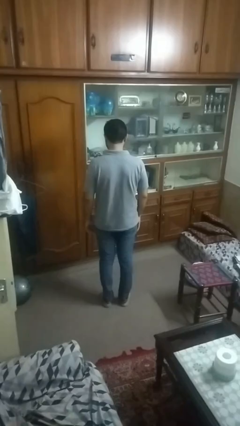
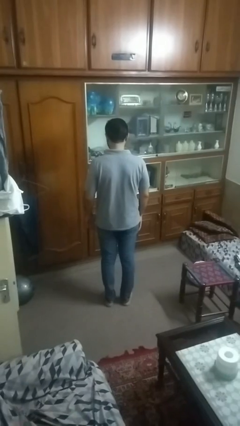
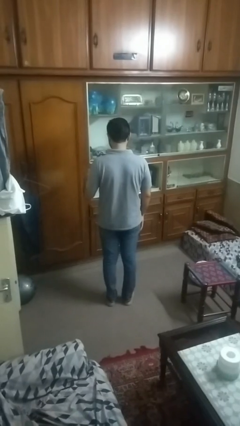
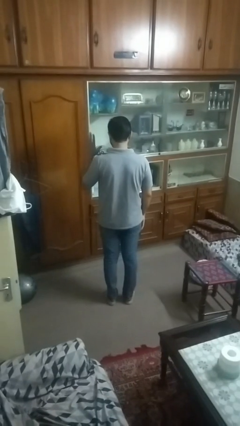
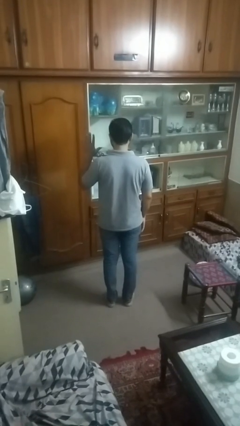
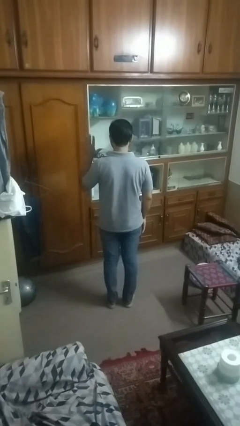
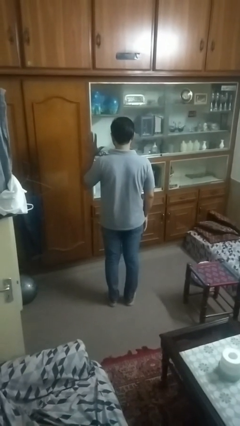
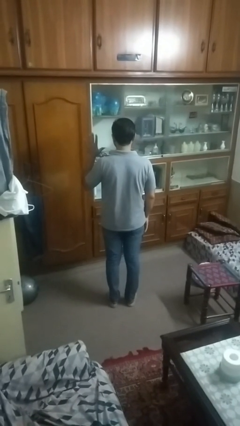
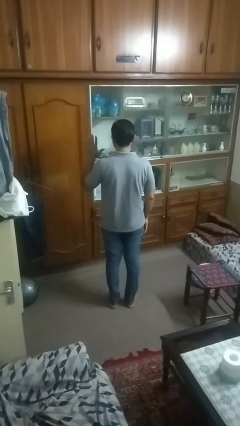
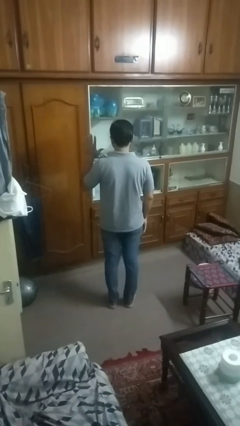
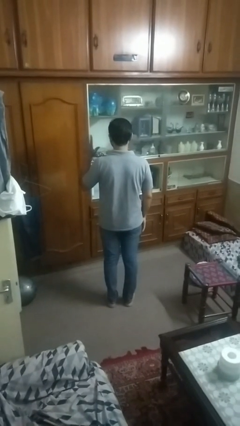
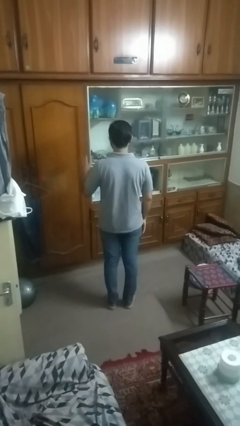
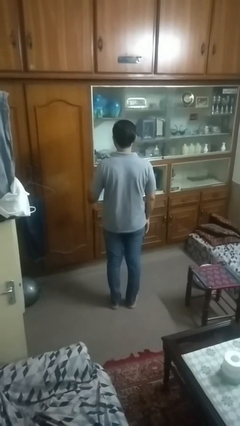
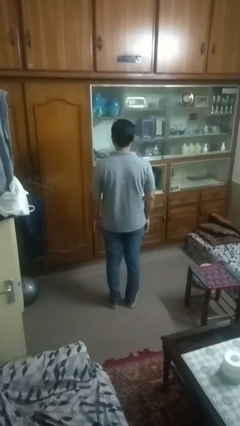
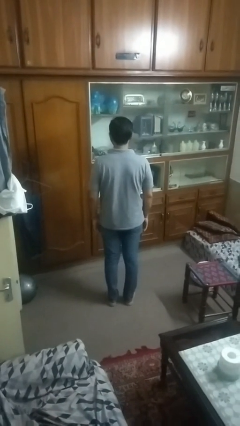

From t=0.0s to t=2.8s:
person gestures number five

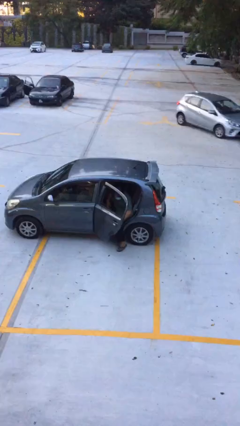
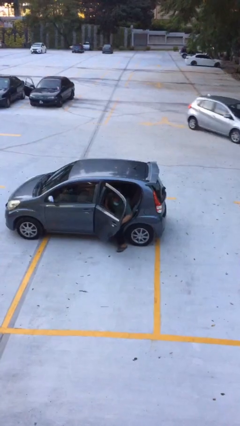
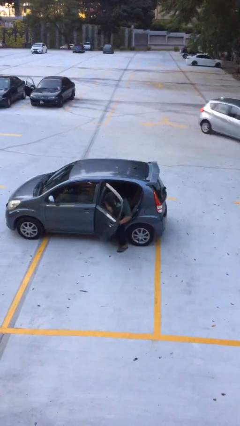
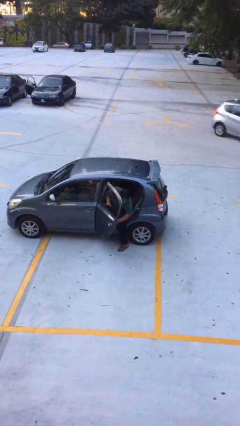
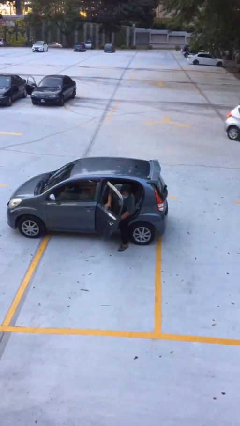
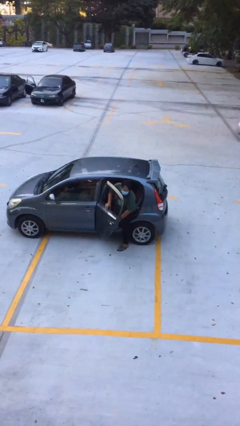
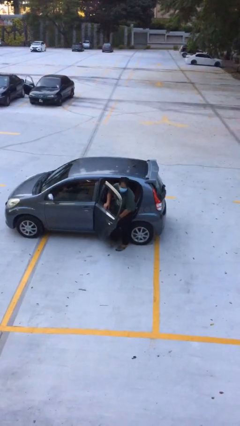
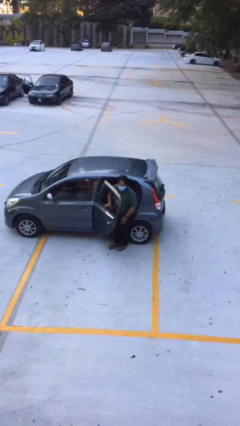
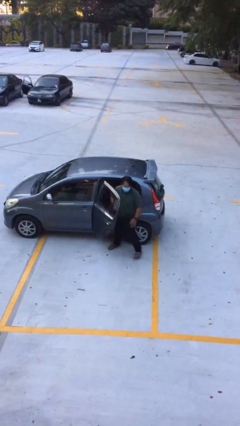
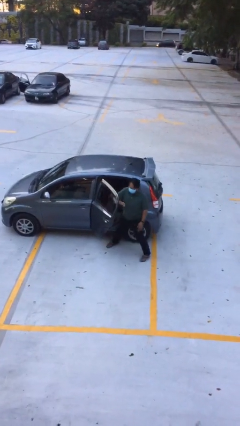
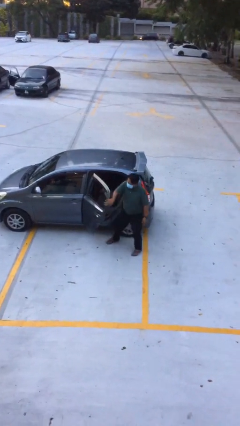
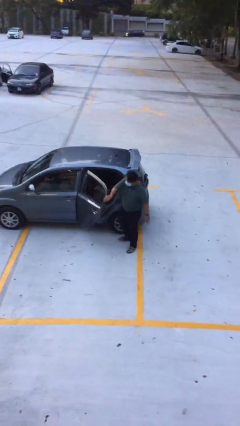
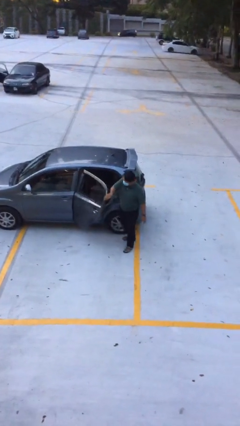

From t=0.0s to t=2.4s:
person exits car

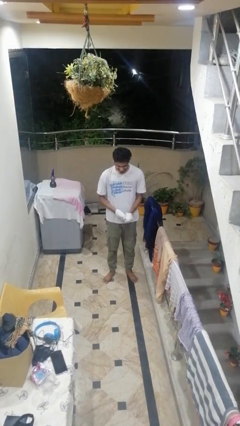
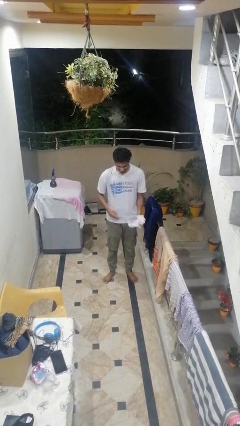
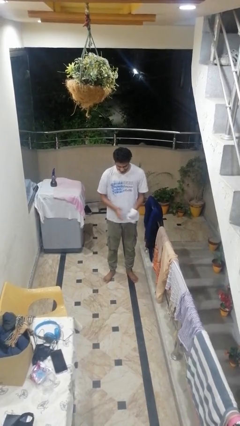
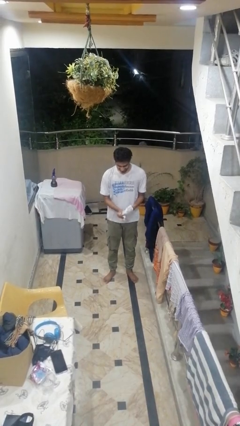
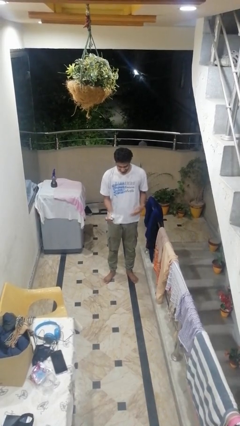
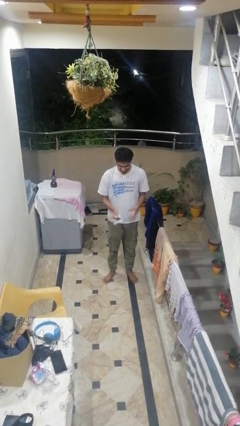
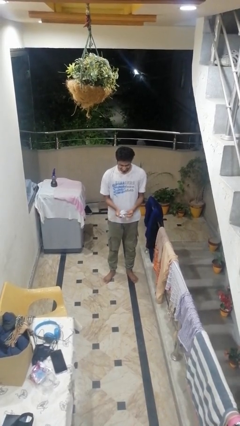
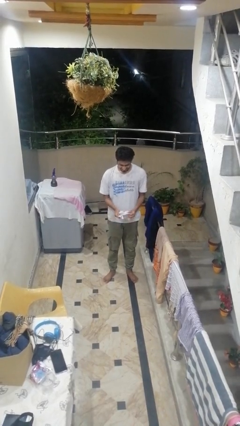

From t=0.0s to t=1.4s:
person takes off gloves

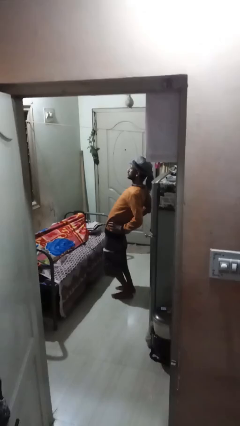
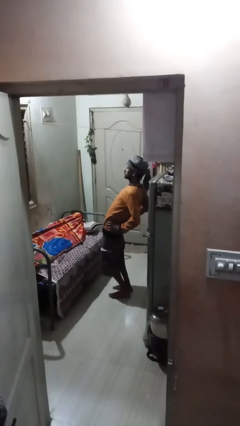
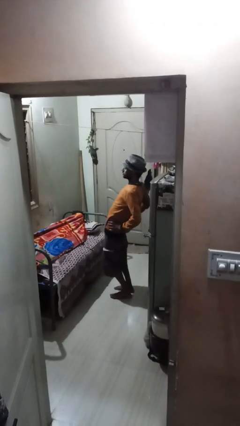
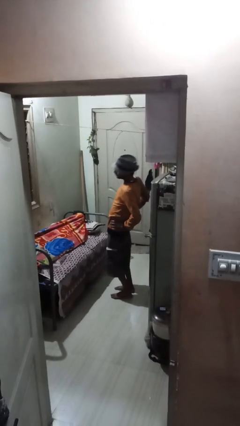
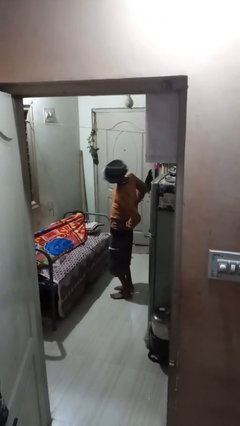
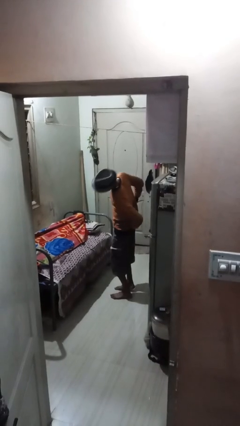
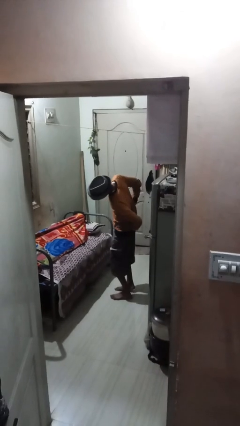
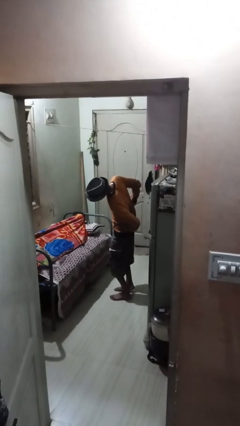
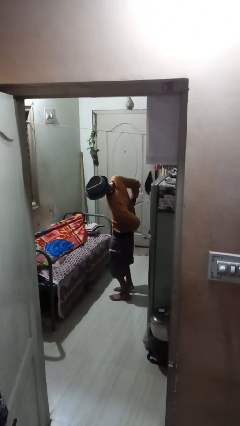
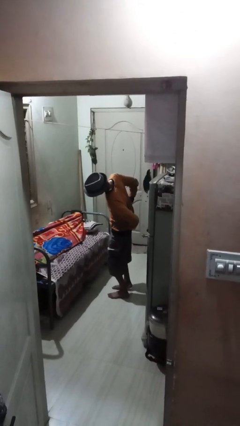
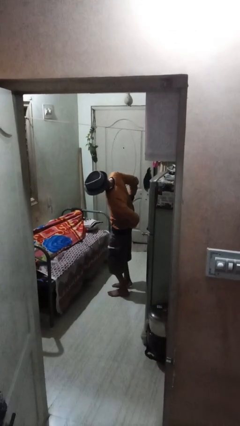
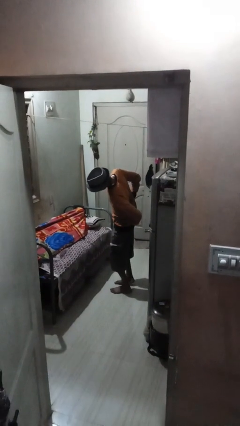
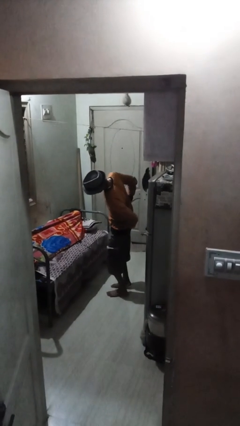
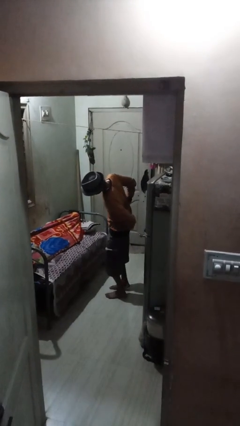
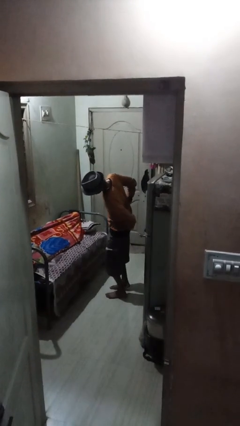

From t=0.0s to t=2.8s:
person stretches arms to side

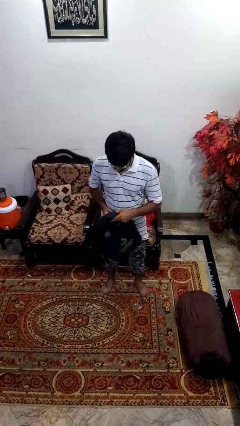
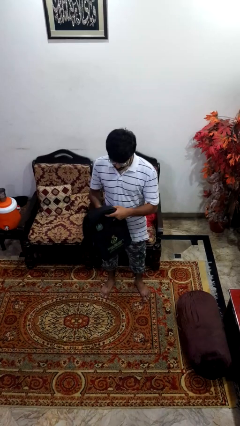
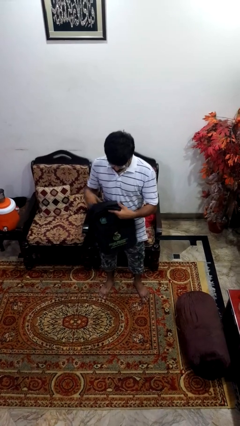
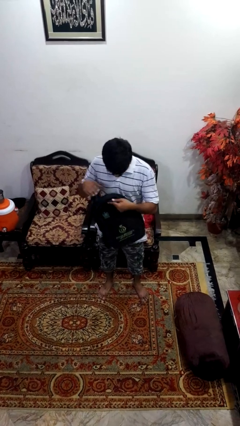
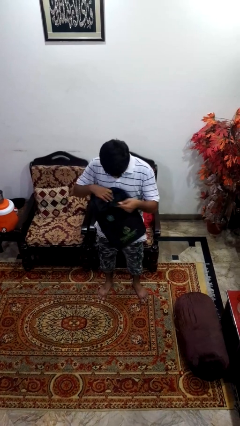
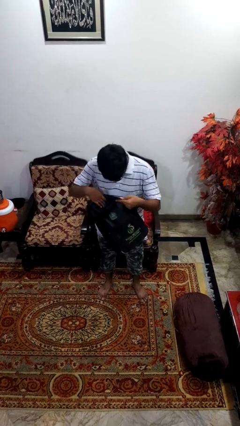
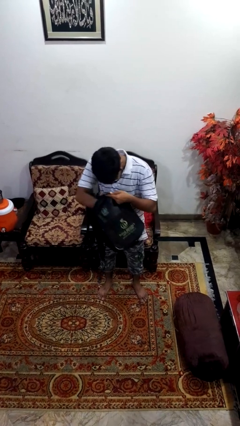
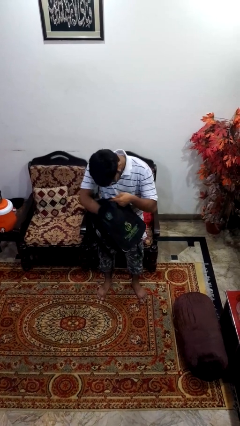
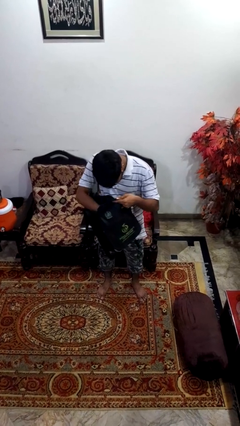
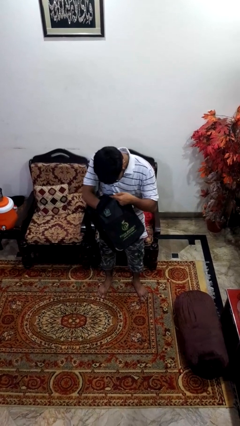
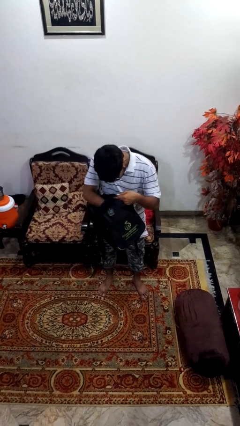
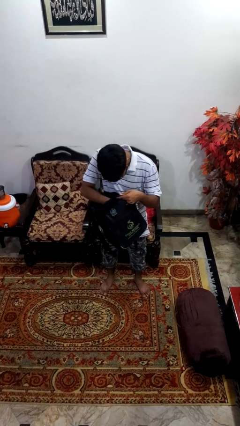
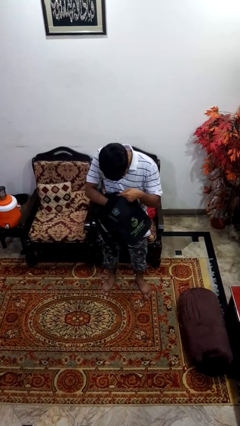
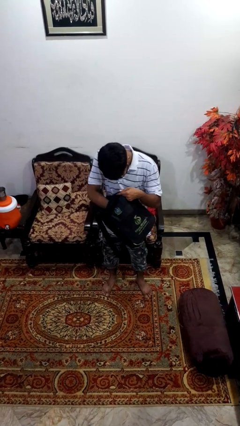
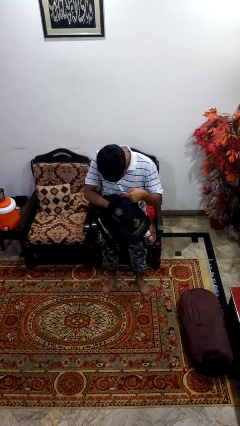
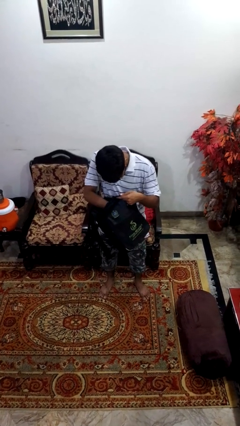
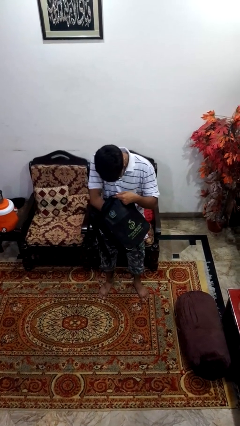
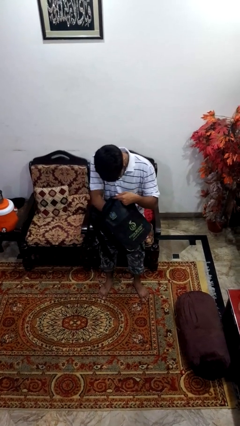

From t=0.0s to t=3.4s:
person searches in backpack

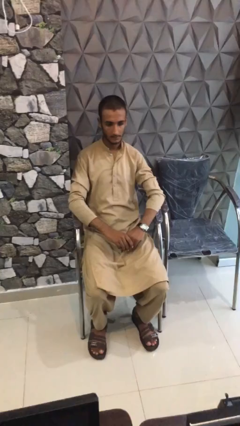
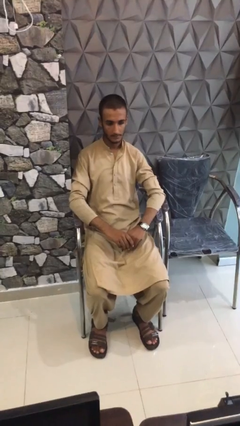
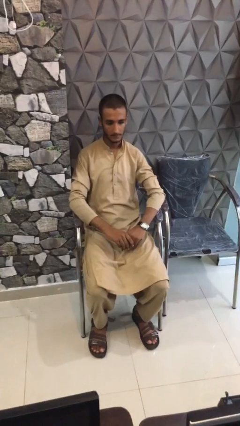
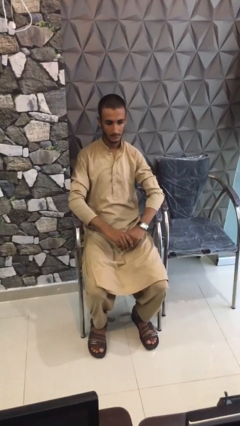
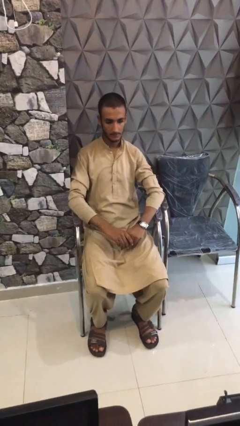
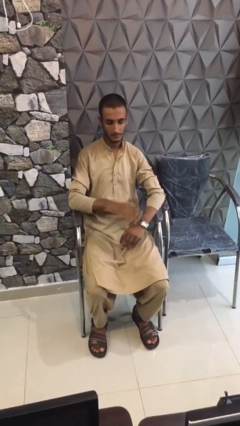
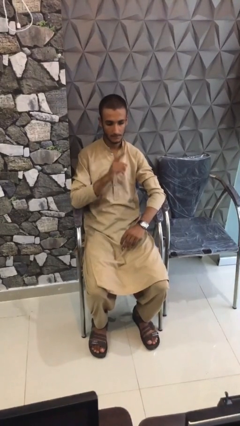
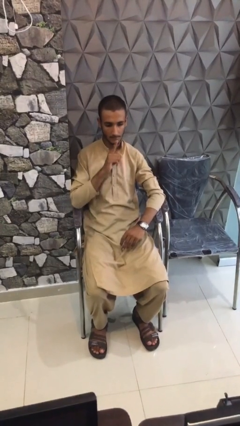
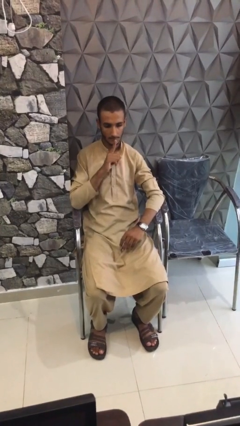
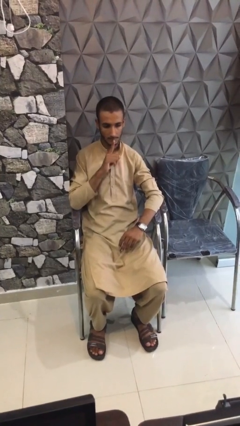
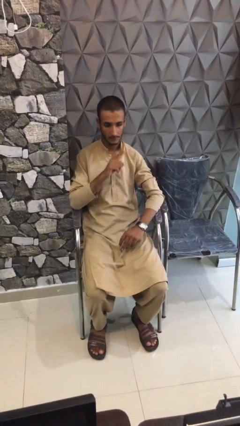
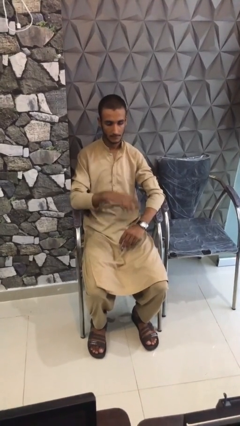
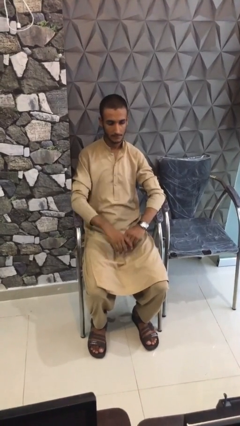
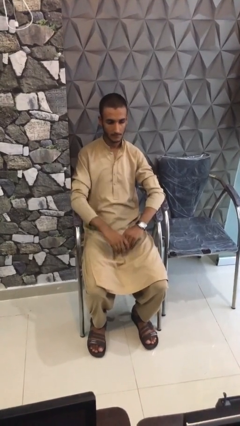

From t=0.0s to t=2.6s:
person gestures be quiet

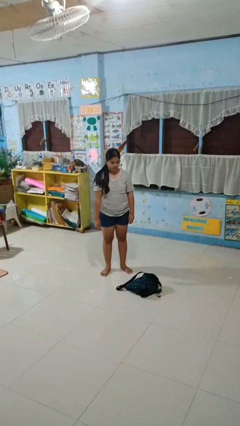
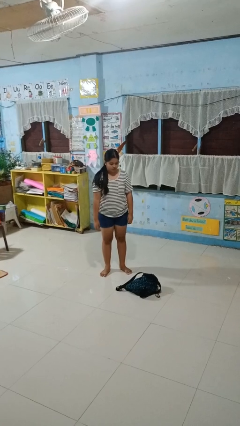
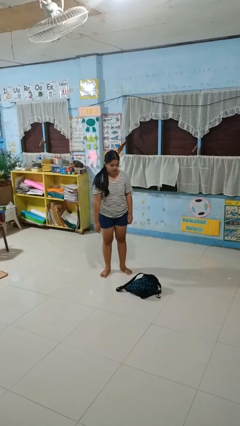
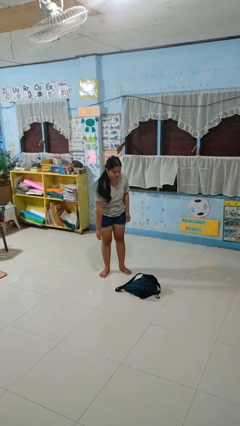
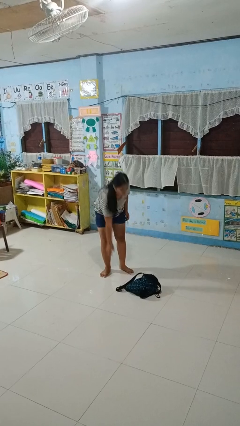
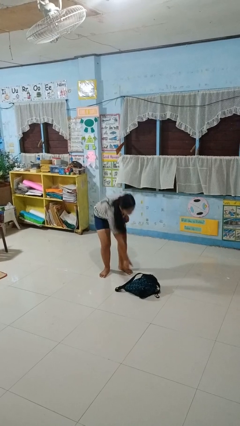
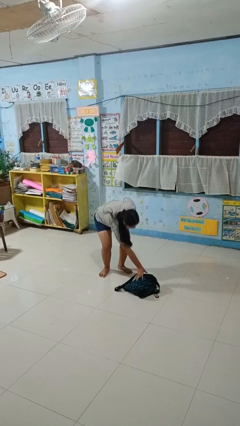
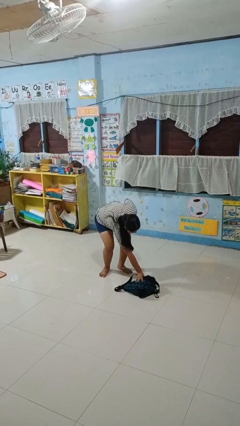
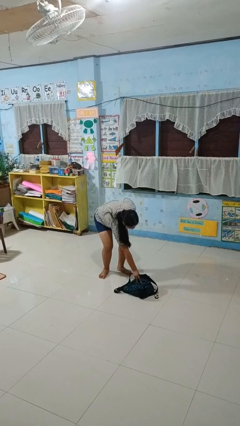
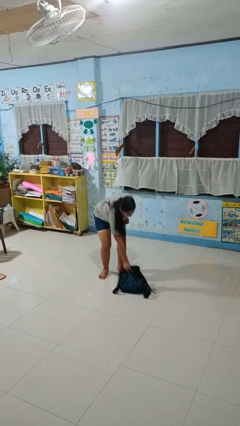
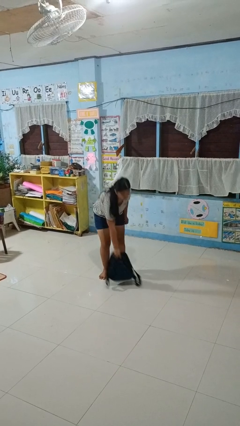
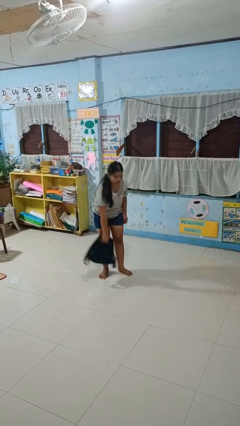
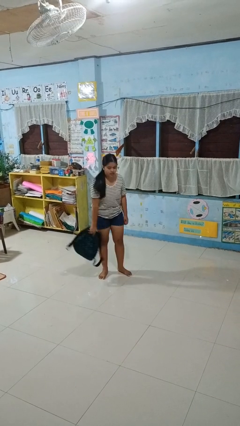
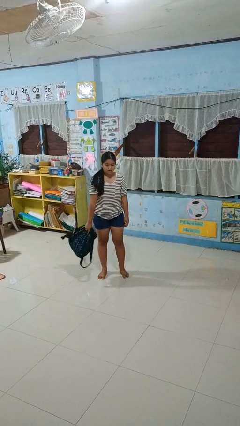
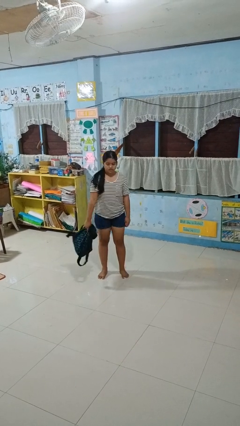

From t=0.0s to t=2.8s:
person picks up object from floor
